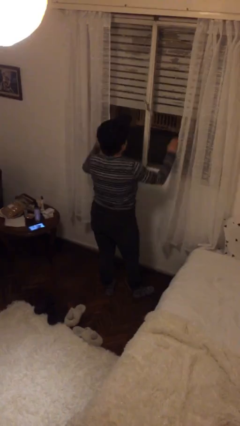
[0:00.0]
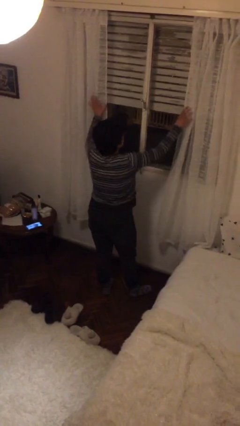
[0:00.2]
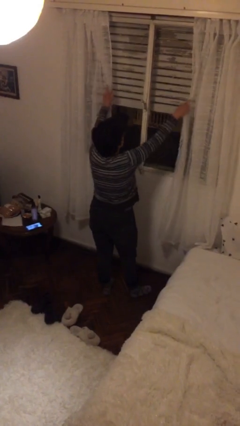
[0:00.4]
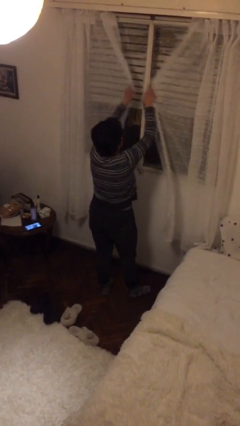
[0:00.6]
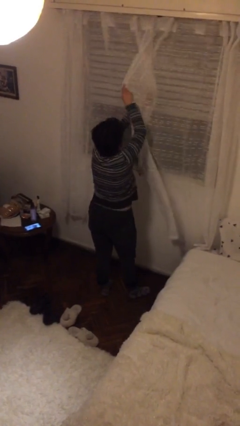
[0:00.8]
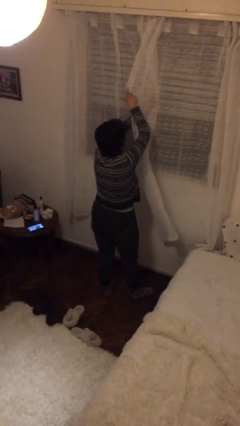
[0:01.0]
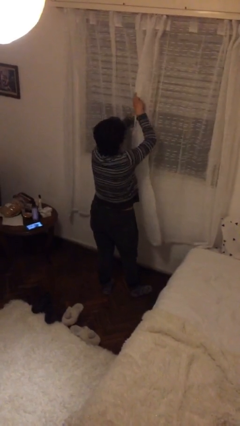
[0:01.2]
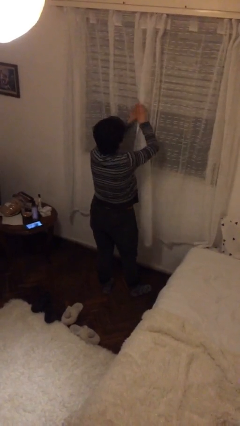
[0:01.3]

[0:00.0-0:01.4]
person closes curtains

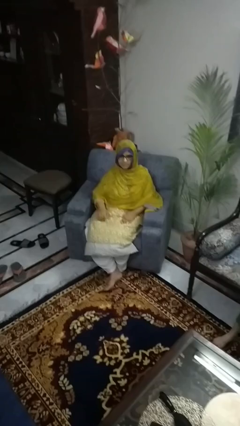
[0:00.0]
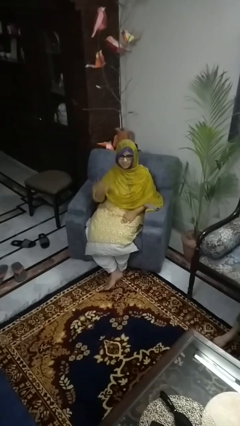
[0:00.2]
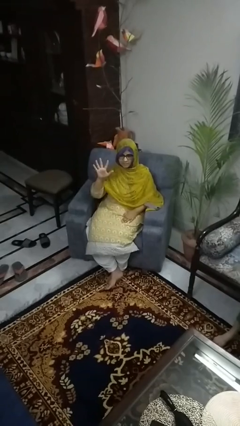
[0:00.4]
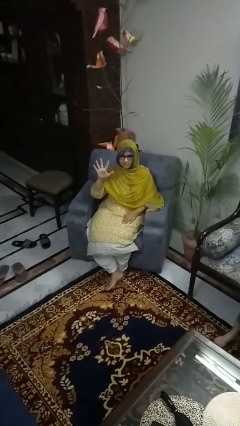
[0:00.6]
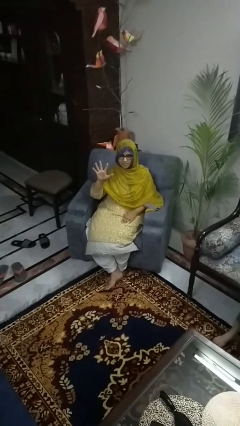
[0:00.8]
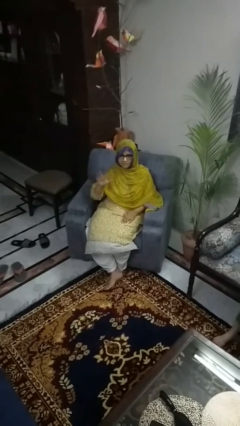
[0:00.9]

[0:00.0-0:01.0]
person gestures number five

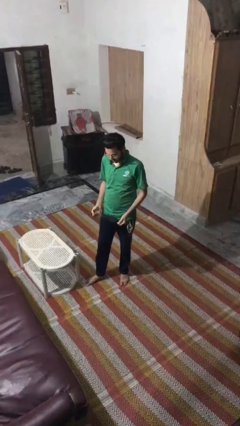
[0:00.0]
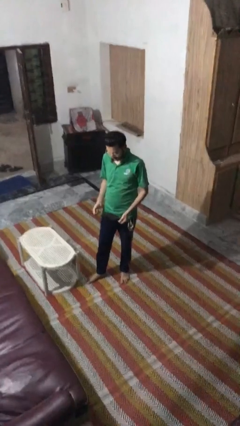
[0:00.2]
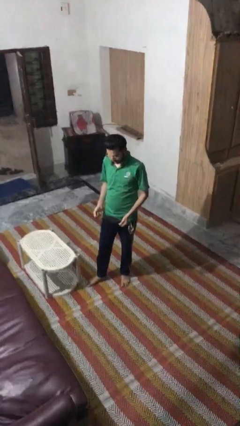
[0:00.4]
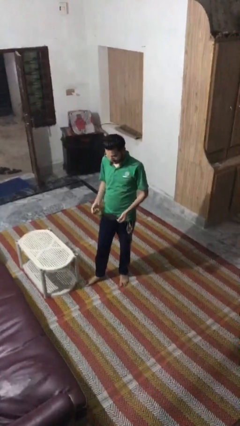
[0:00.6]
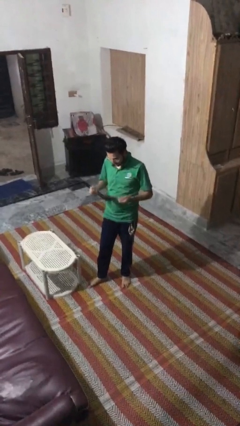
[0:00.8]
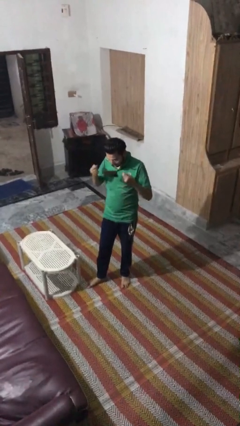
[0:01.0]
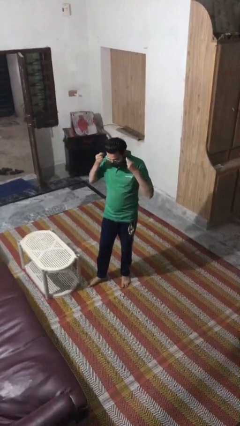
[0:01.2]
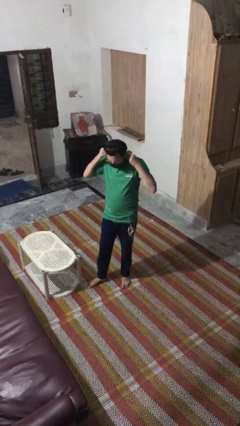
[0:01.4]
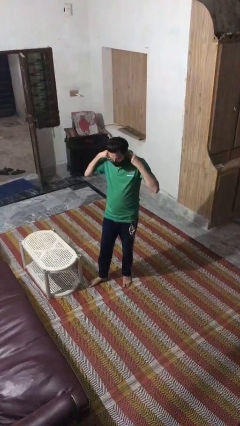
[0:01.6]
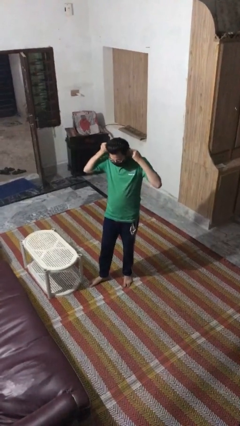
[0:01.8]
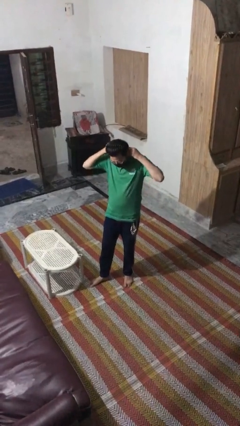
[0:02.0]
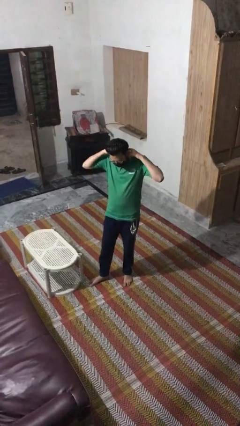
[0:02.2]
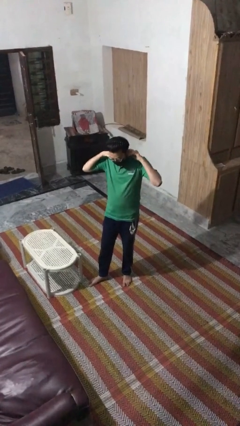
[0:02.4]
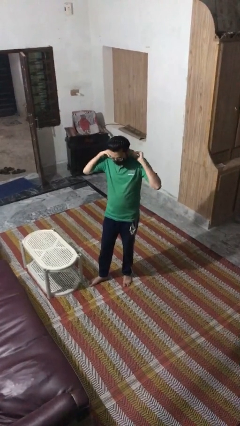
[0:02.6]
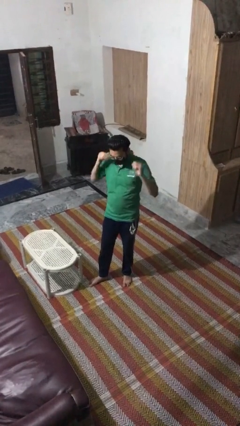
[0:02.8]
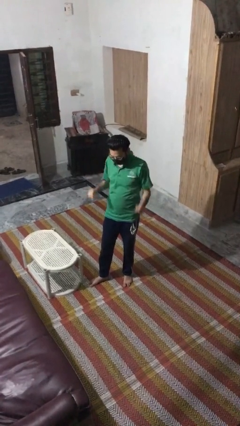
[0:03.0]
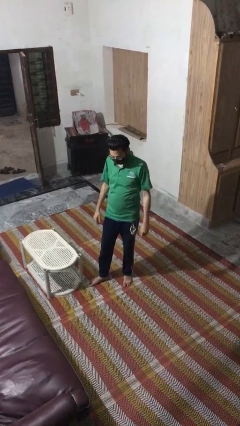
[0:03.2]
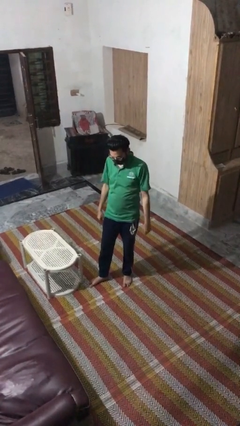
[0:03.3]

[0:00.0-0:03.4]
person puts on facemask

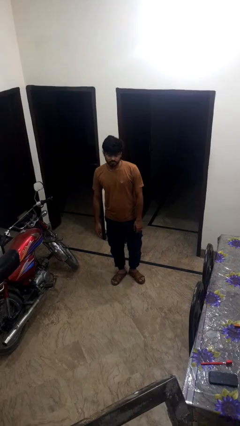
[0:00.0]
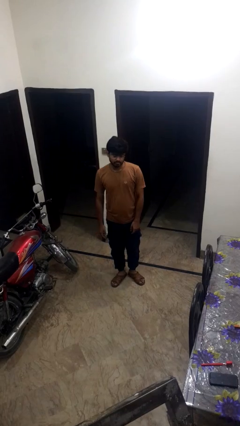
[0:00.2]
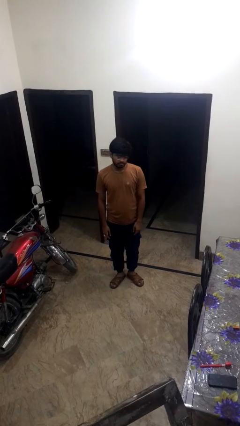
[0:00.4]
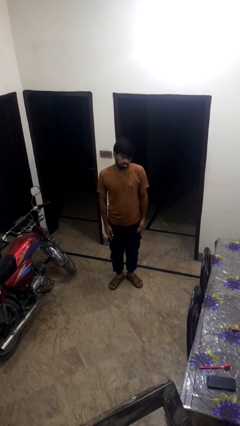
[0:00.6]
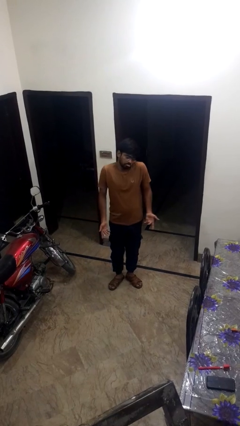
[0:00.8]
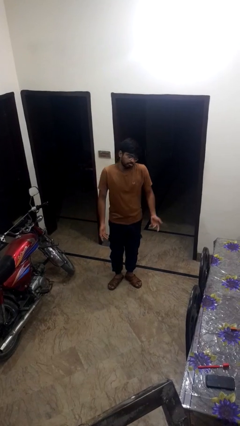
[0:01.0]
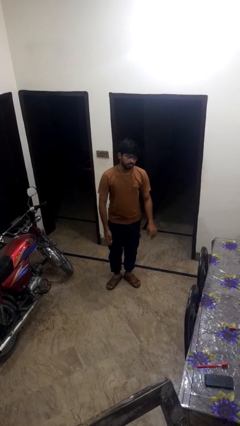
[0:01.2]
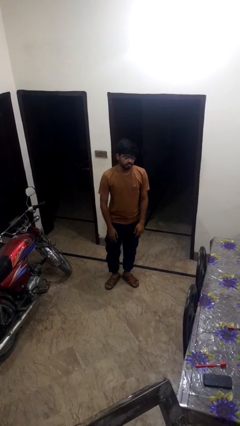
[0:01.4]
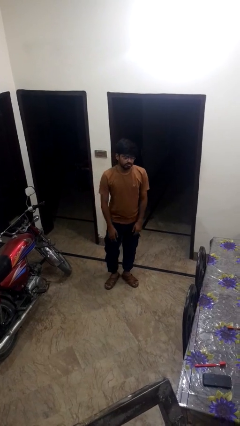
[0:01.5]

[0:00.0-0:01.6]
person shrugs

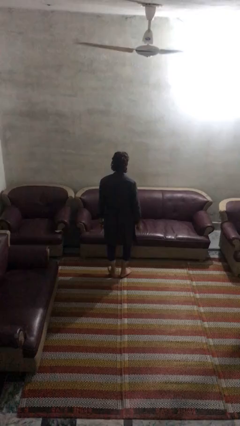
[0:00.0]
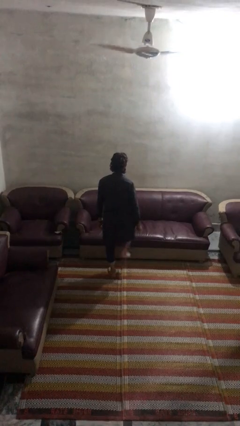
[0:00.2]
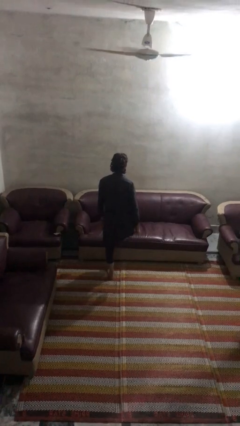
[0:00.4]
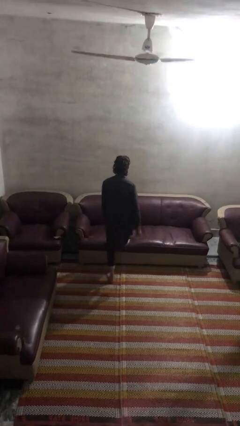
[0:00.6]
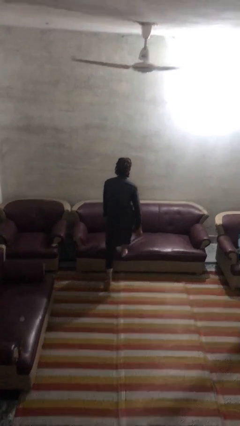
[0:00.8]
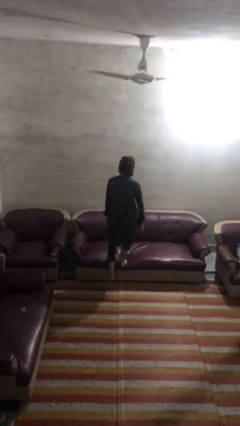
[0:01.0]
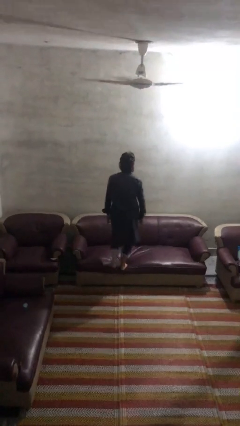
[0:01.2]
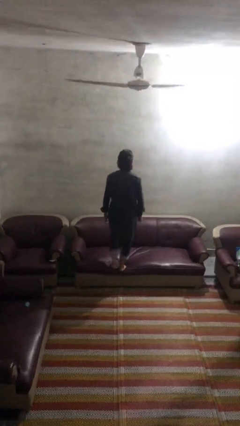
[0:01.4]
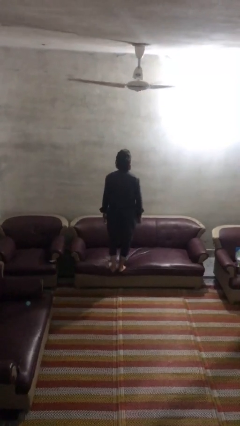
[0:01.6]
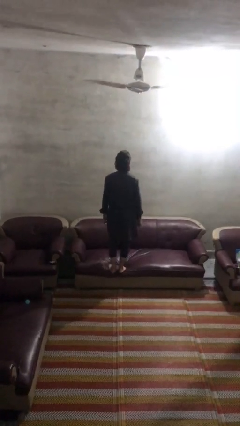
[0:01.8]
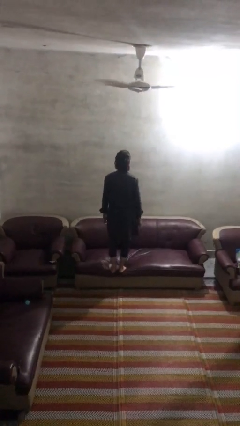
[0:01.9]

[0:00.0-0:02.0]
person climbs on couch

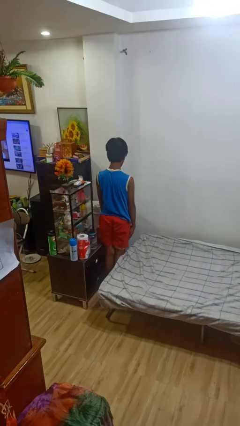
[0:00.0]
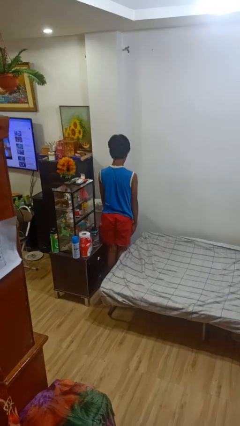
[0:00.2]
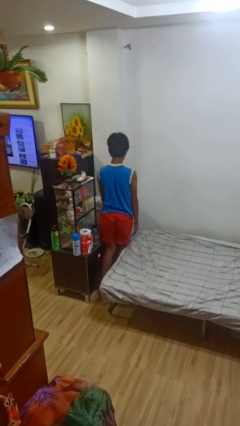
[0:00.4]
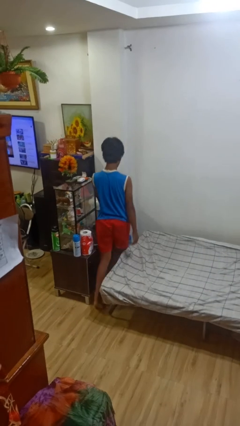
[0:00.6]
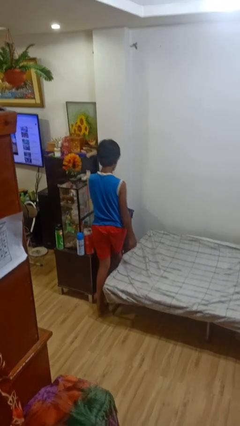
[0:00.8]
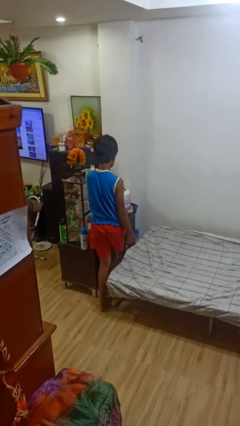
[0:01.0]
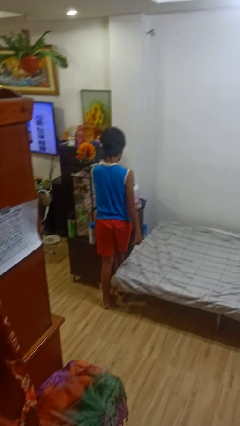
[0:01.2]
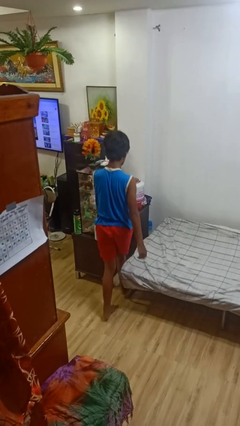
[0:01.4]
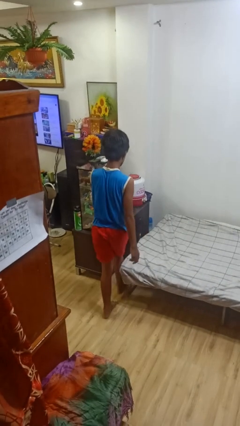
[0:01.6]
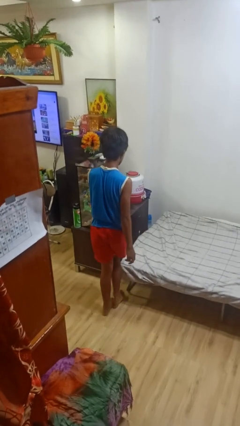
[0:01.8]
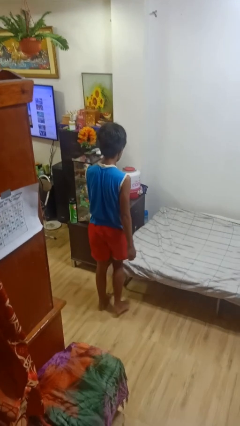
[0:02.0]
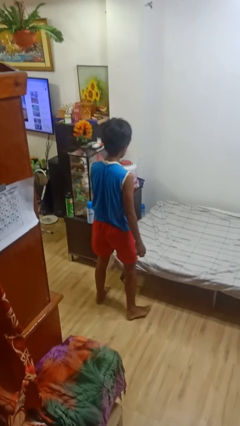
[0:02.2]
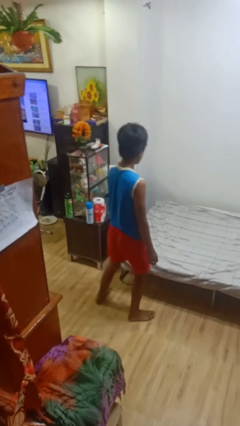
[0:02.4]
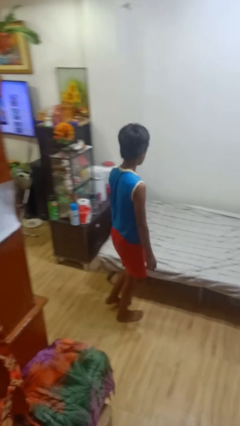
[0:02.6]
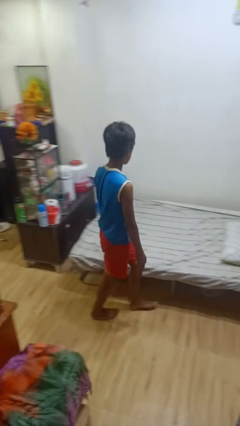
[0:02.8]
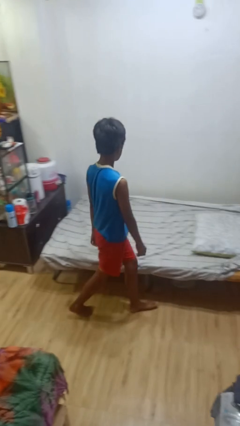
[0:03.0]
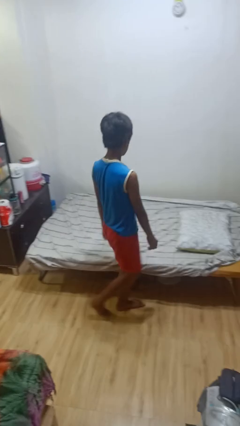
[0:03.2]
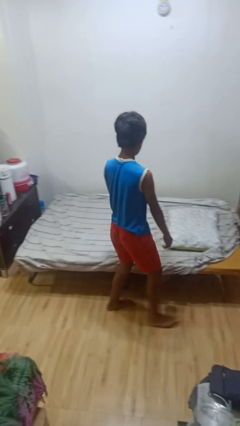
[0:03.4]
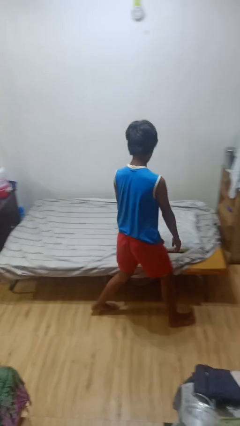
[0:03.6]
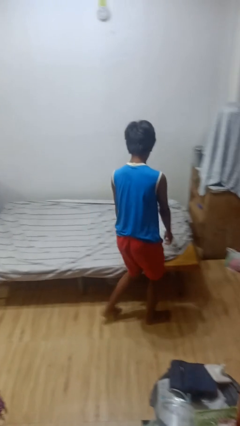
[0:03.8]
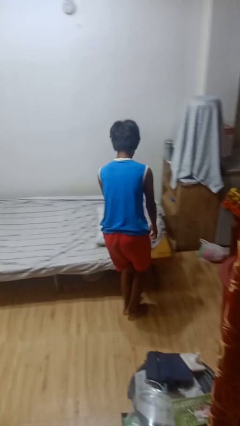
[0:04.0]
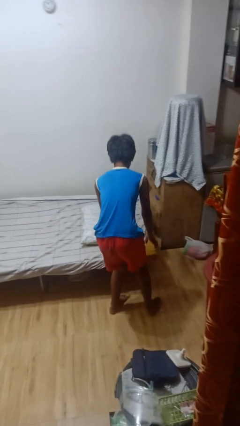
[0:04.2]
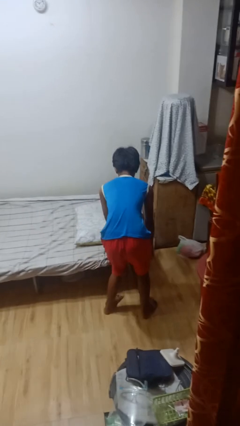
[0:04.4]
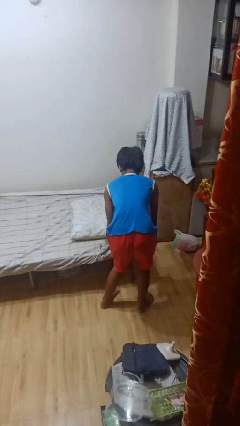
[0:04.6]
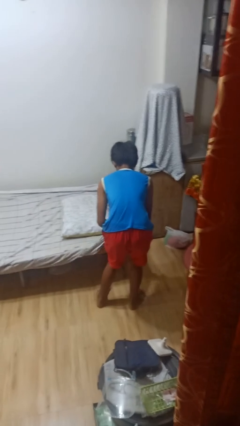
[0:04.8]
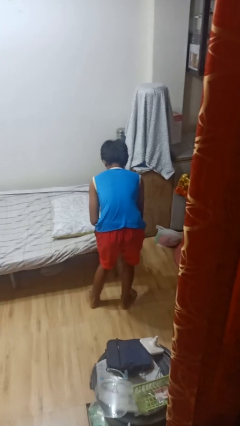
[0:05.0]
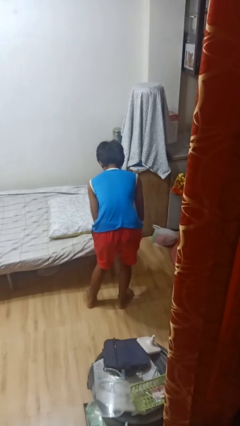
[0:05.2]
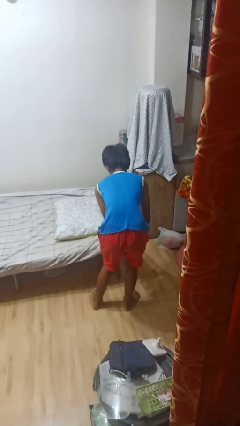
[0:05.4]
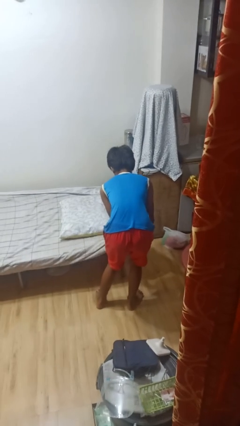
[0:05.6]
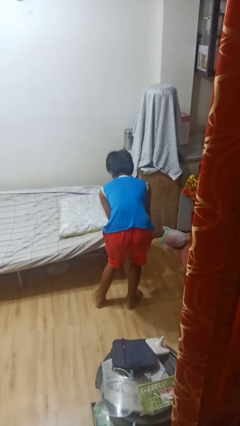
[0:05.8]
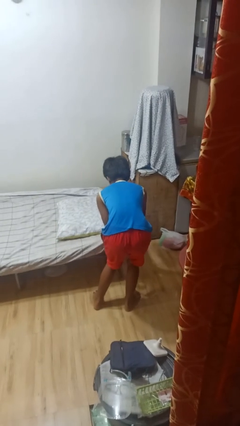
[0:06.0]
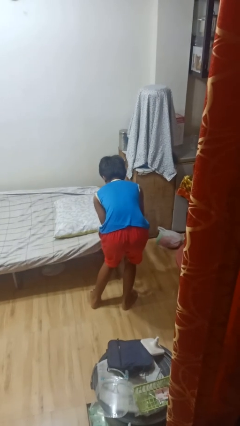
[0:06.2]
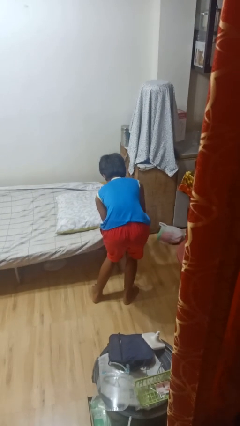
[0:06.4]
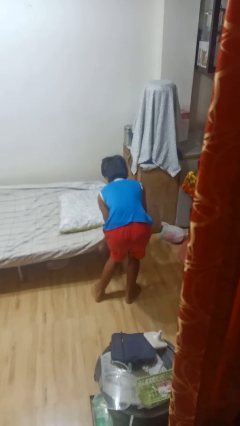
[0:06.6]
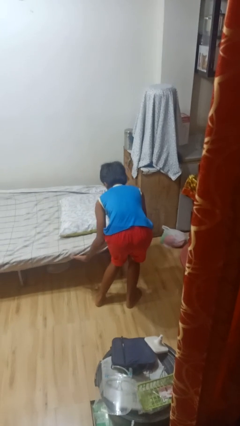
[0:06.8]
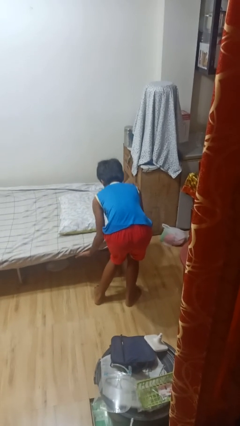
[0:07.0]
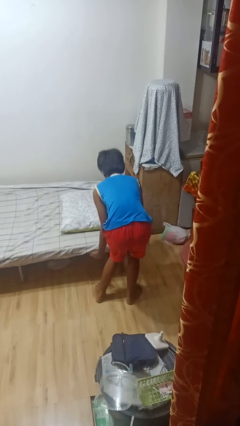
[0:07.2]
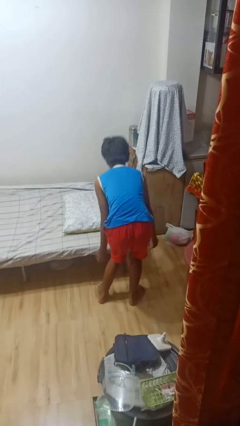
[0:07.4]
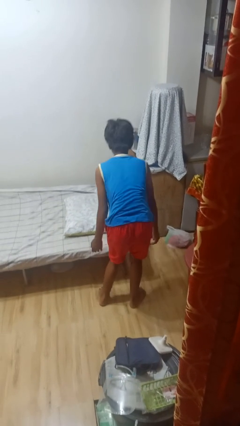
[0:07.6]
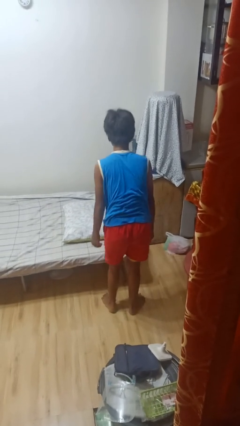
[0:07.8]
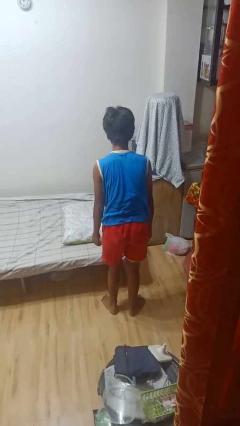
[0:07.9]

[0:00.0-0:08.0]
person makes bed

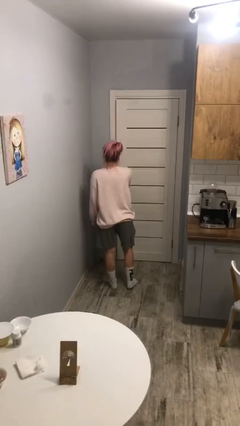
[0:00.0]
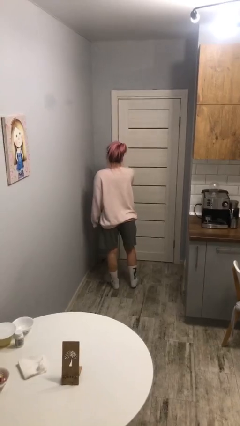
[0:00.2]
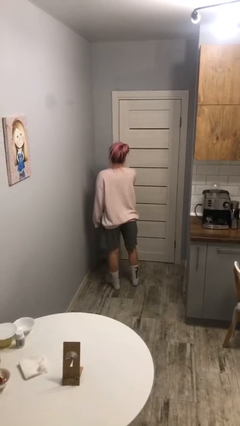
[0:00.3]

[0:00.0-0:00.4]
person closes facility door
